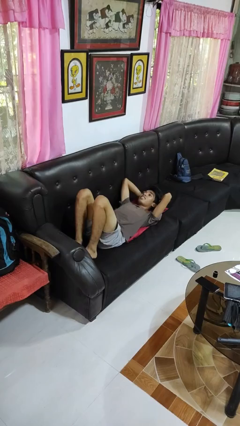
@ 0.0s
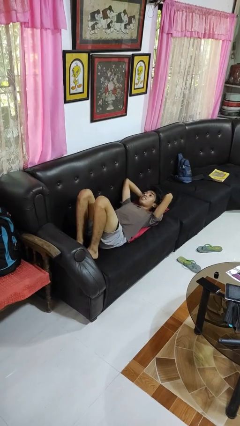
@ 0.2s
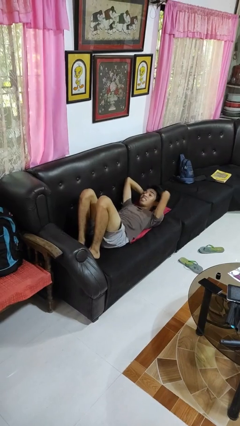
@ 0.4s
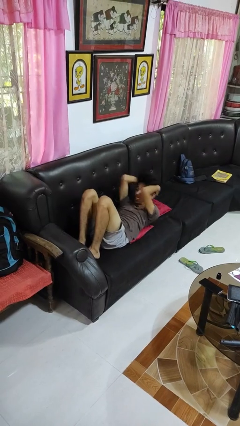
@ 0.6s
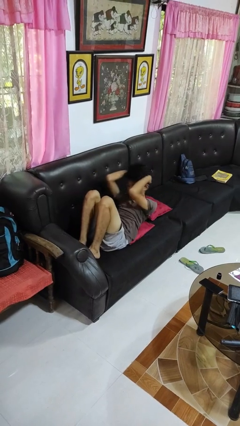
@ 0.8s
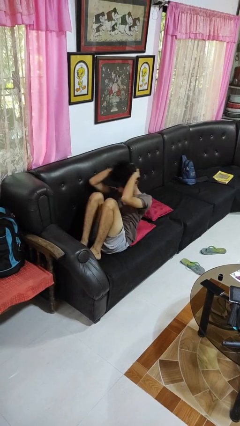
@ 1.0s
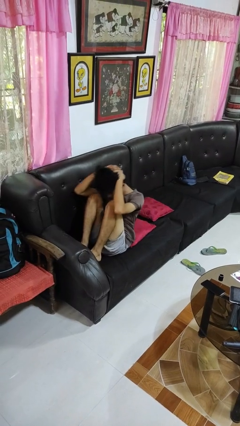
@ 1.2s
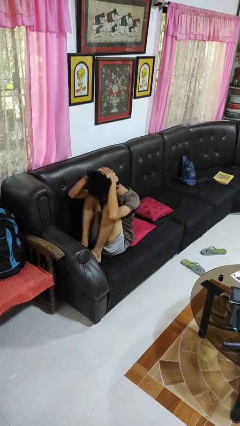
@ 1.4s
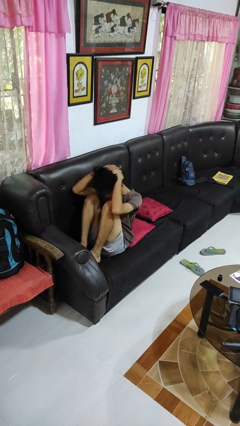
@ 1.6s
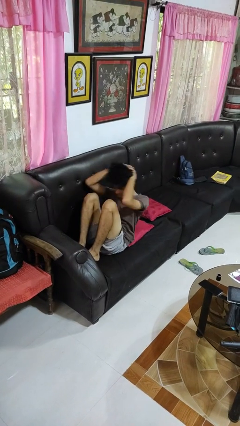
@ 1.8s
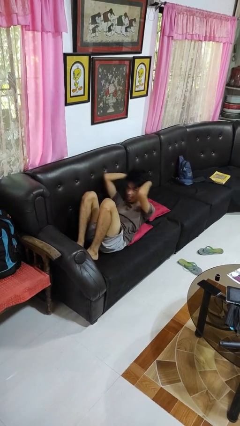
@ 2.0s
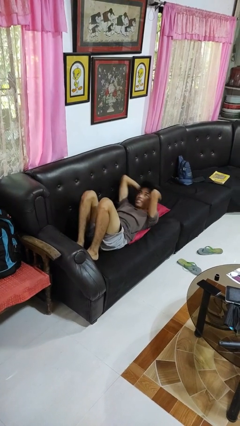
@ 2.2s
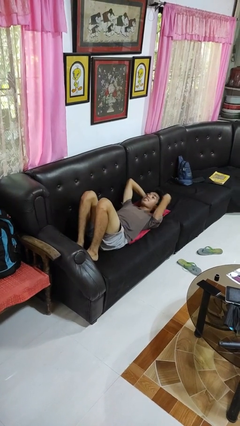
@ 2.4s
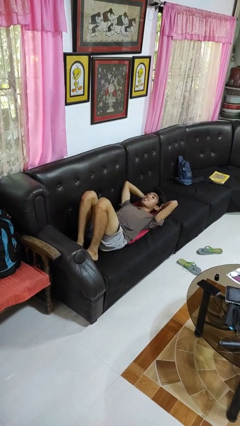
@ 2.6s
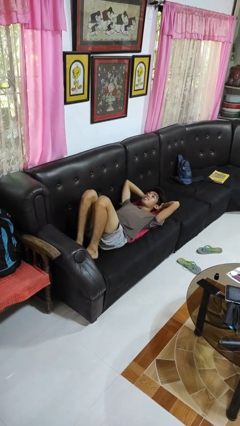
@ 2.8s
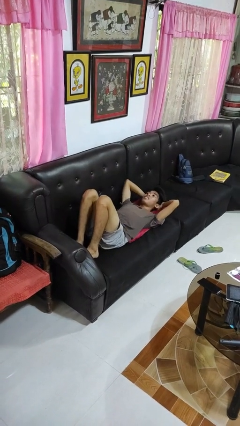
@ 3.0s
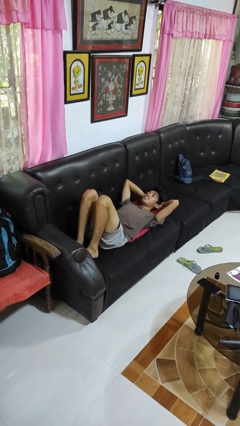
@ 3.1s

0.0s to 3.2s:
person exercises with situp

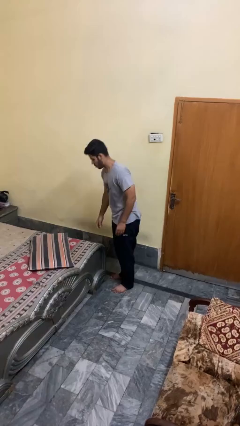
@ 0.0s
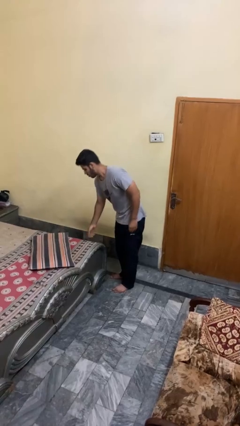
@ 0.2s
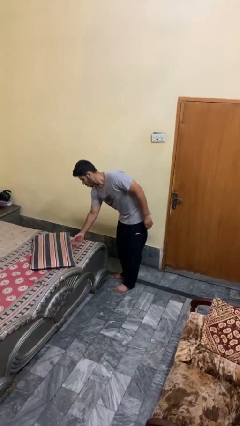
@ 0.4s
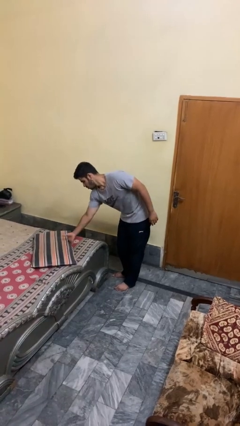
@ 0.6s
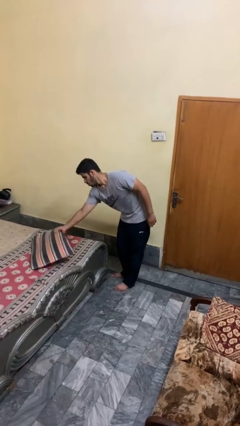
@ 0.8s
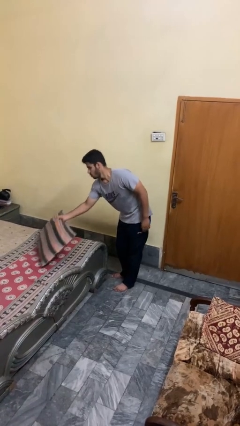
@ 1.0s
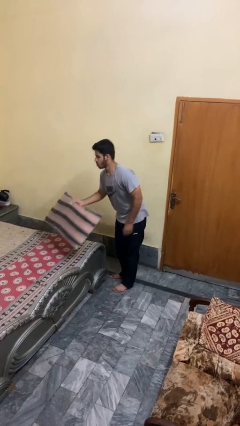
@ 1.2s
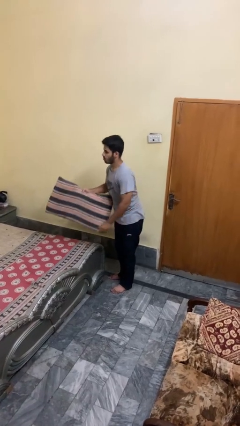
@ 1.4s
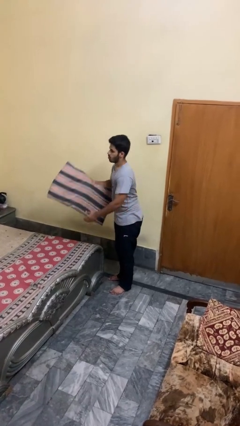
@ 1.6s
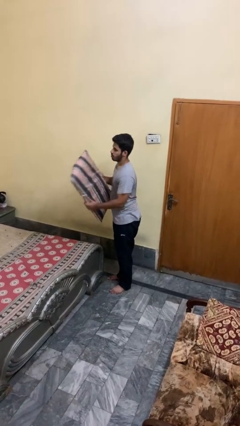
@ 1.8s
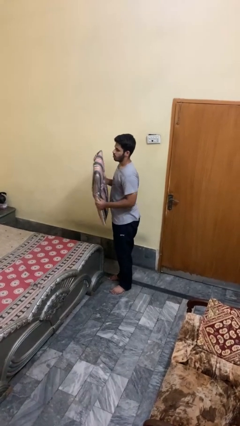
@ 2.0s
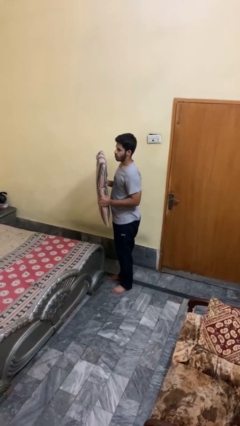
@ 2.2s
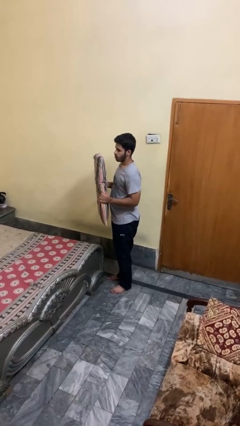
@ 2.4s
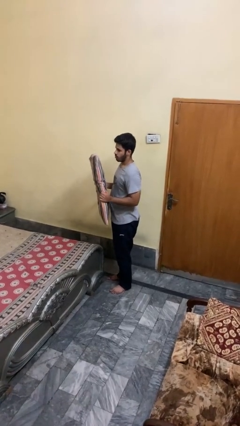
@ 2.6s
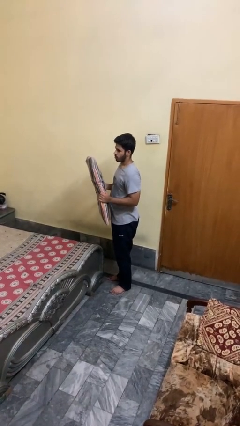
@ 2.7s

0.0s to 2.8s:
person picks up object from bed

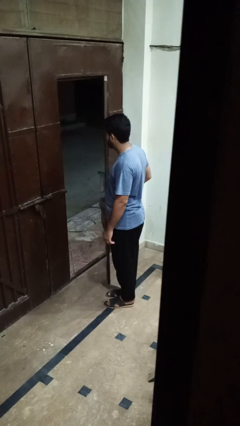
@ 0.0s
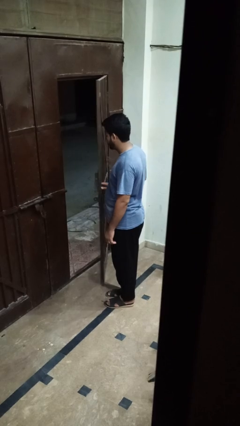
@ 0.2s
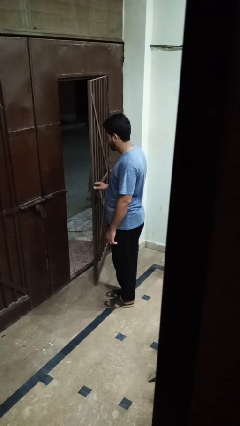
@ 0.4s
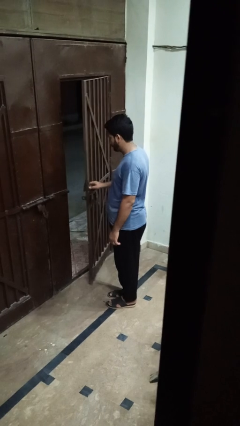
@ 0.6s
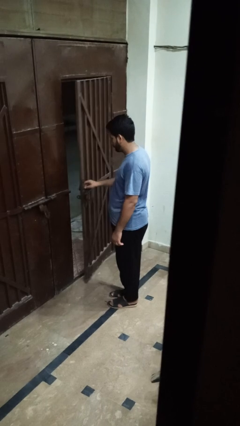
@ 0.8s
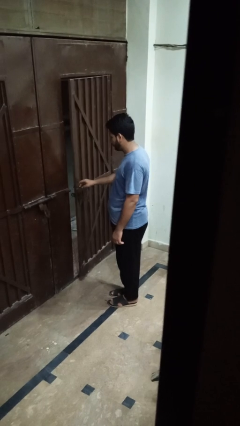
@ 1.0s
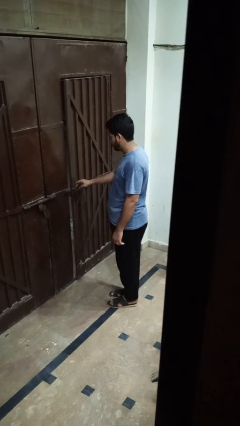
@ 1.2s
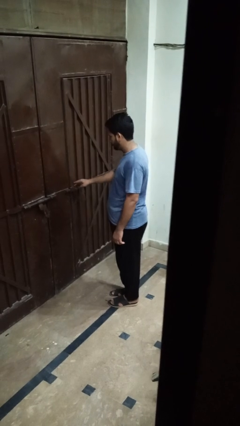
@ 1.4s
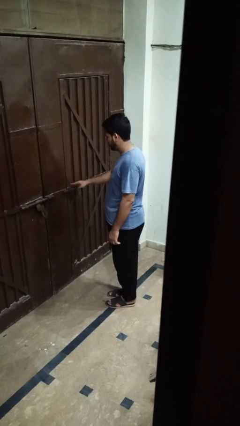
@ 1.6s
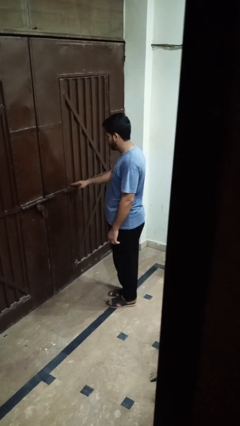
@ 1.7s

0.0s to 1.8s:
person closes gate

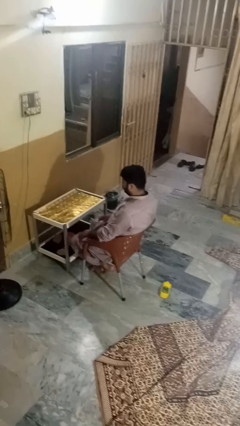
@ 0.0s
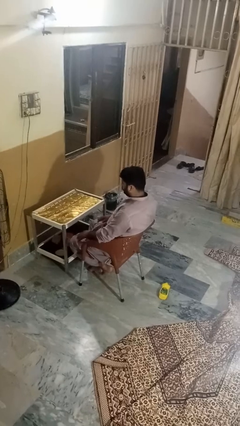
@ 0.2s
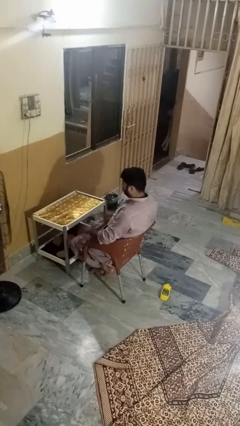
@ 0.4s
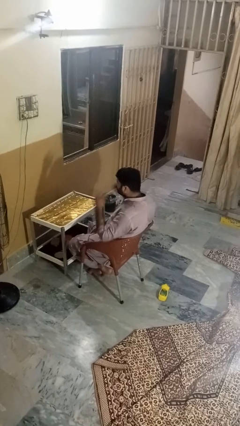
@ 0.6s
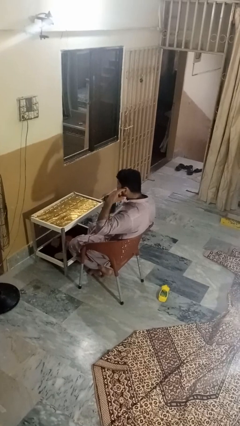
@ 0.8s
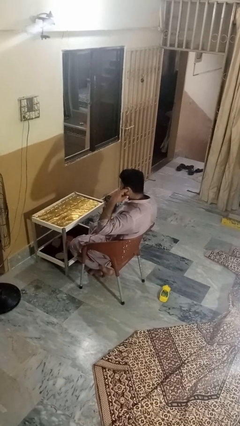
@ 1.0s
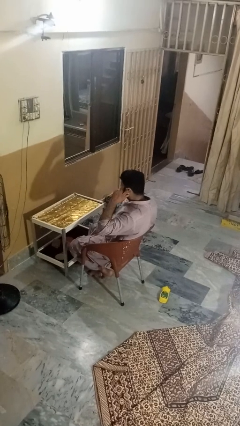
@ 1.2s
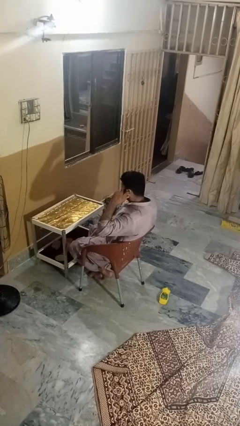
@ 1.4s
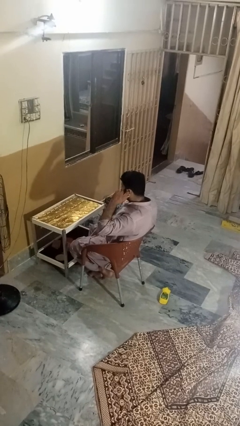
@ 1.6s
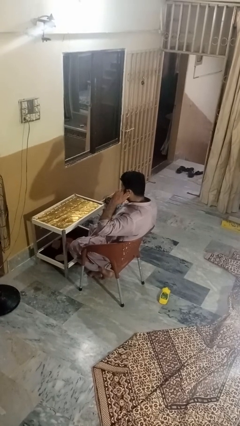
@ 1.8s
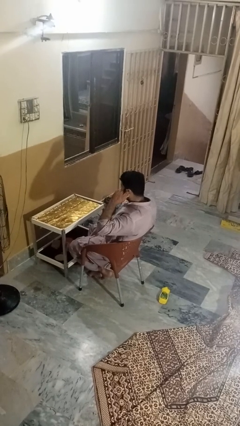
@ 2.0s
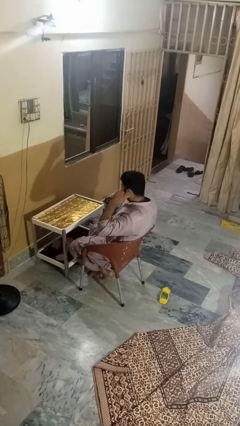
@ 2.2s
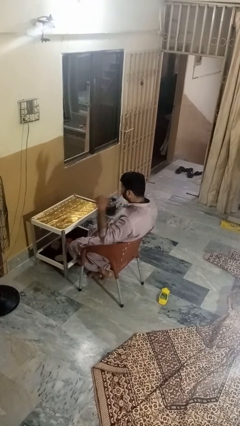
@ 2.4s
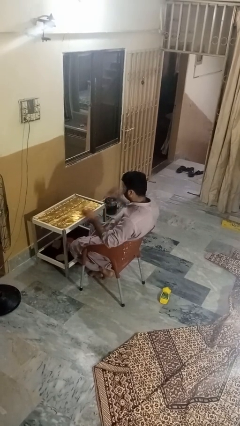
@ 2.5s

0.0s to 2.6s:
person puts fingers in ear

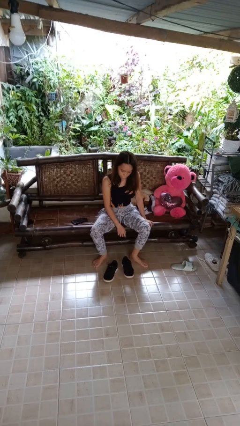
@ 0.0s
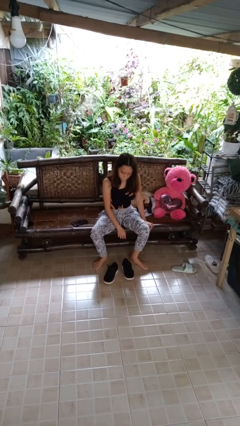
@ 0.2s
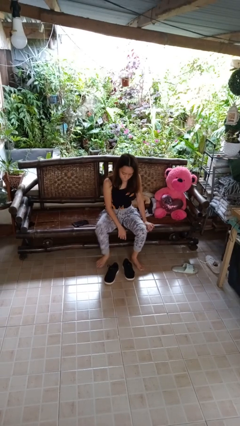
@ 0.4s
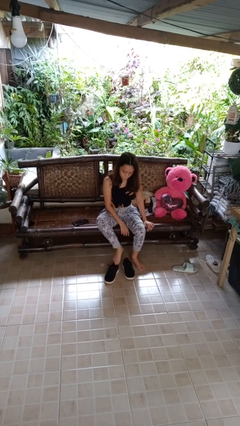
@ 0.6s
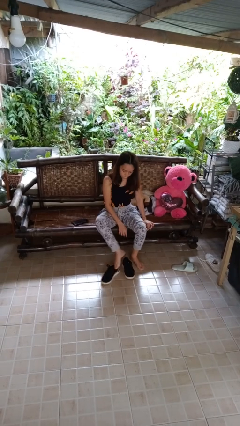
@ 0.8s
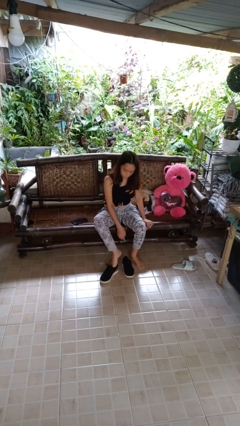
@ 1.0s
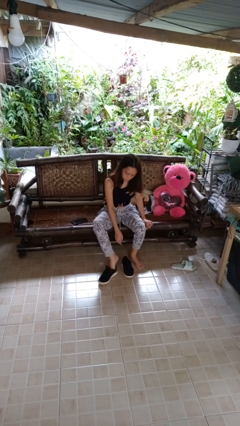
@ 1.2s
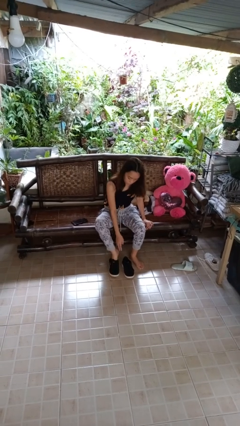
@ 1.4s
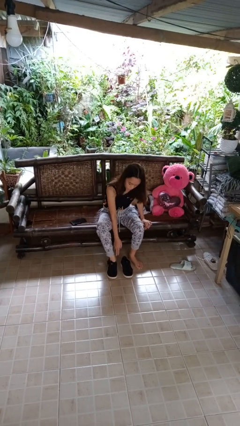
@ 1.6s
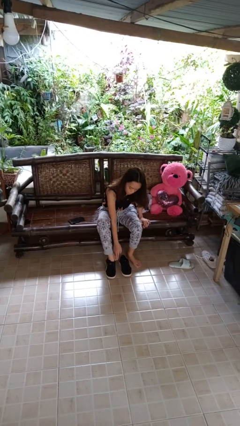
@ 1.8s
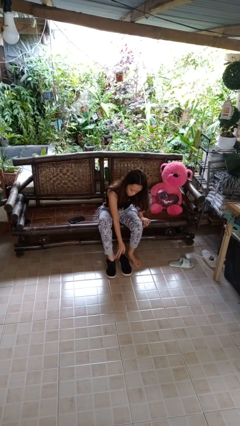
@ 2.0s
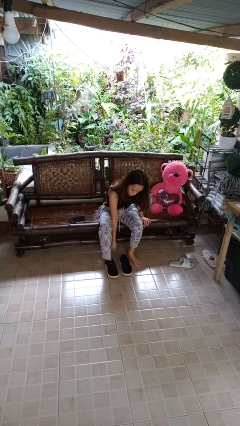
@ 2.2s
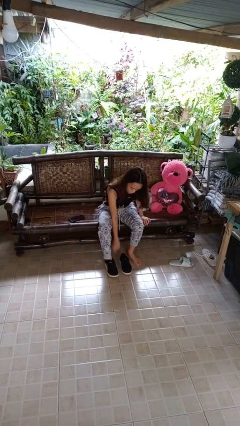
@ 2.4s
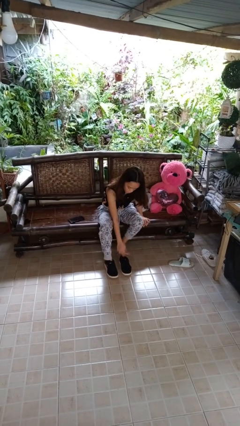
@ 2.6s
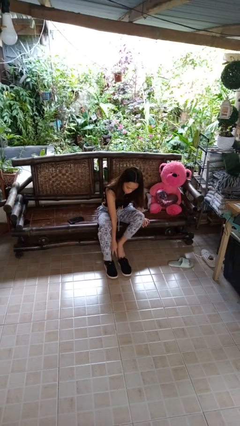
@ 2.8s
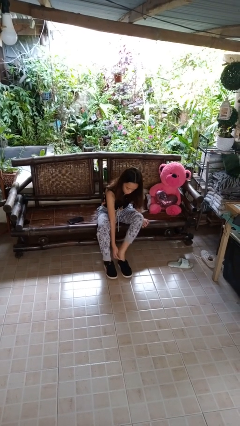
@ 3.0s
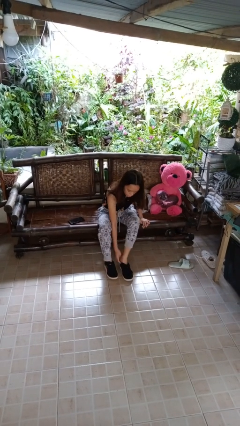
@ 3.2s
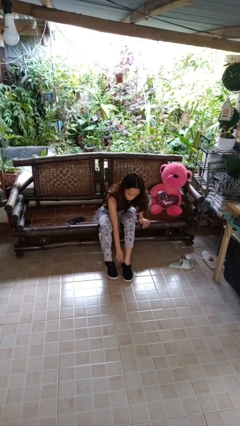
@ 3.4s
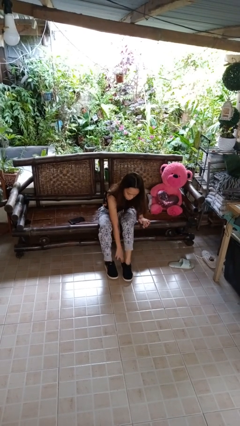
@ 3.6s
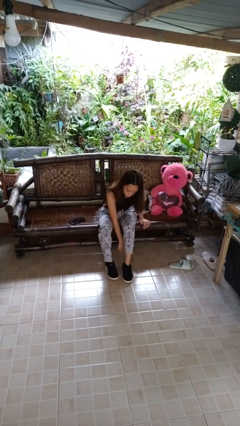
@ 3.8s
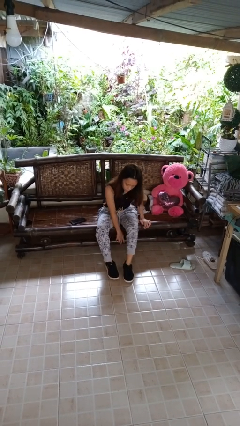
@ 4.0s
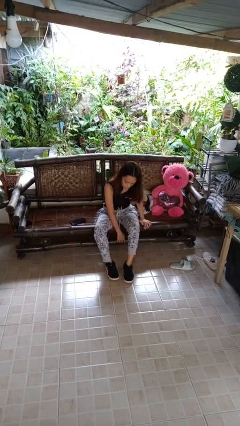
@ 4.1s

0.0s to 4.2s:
person puts on shoes

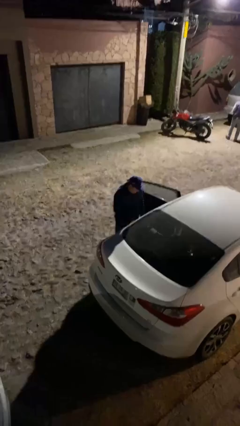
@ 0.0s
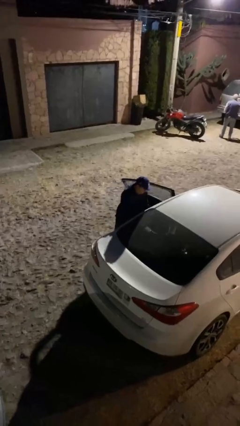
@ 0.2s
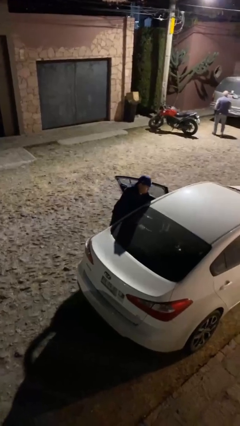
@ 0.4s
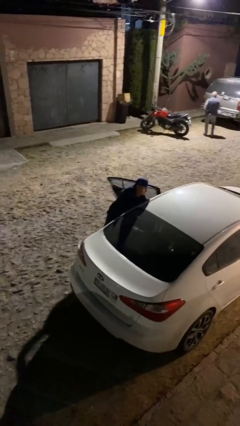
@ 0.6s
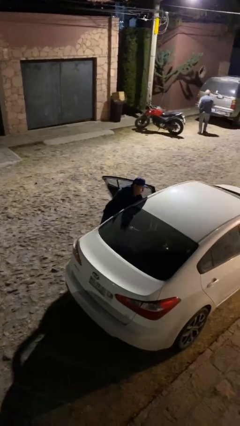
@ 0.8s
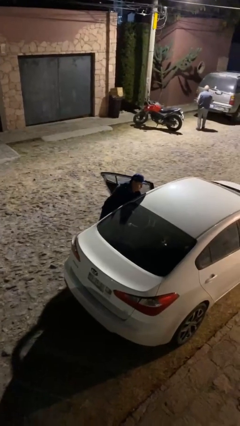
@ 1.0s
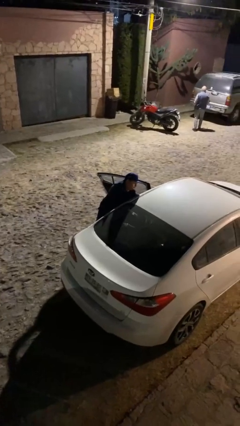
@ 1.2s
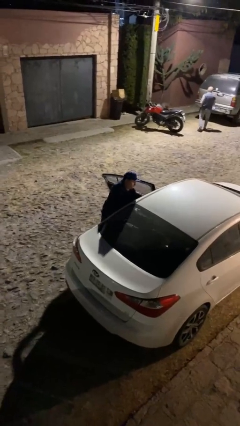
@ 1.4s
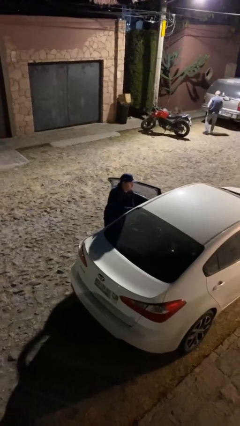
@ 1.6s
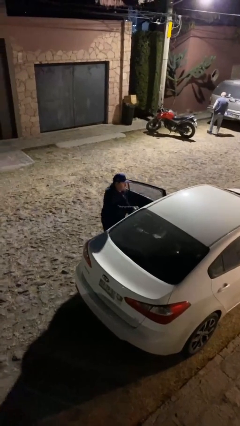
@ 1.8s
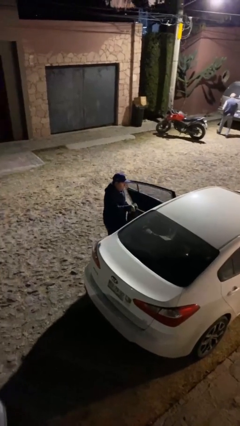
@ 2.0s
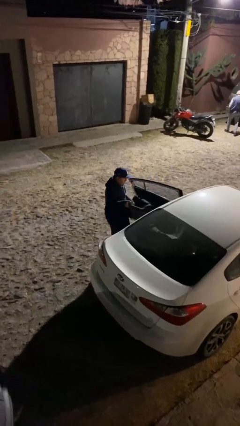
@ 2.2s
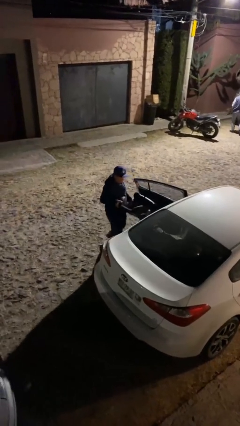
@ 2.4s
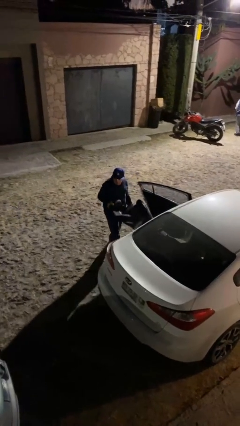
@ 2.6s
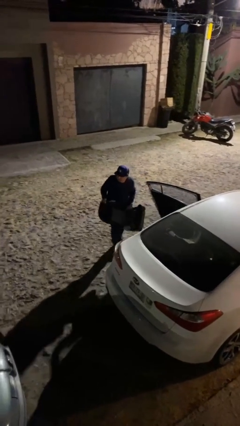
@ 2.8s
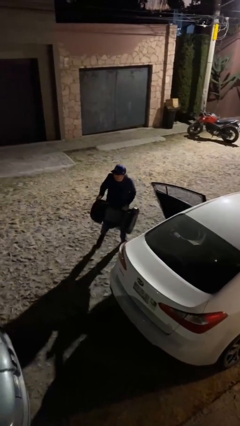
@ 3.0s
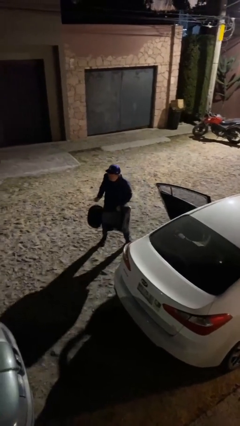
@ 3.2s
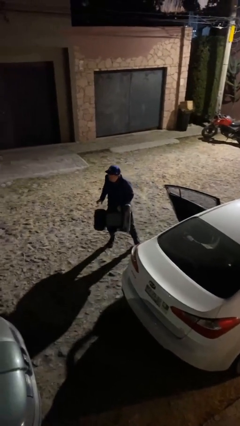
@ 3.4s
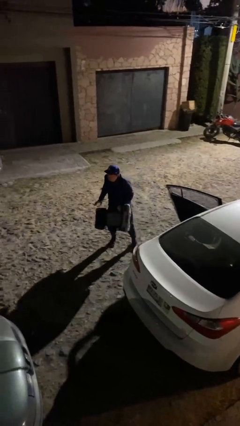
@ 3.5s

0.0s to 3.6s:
person unloads car
